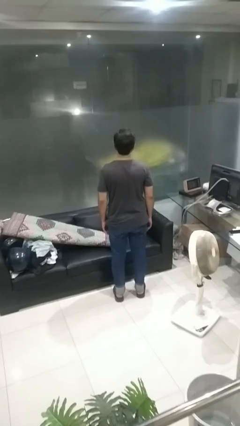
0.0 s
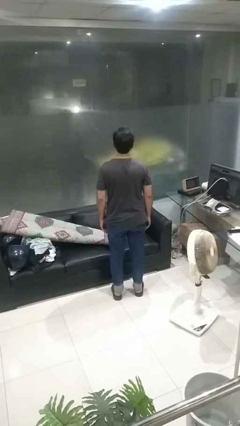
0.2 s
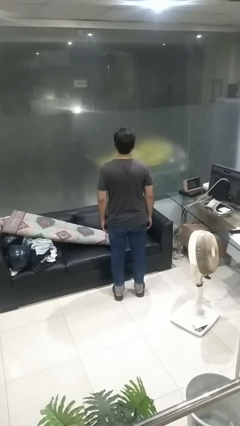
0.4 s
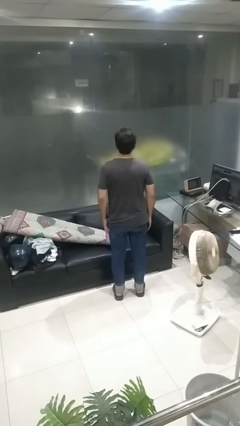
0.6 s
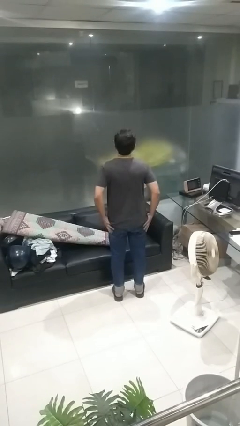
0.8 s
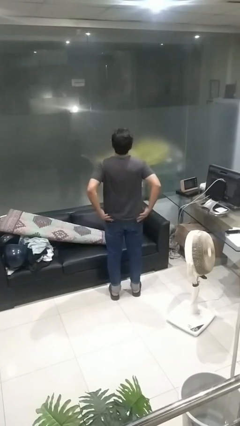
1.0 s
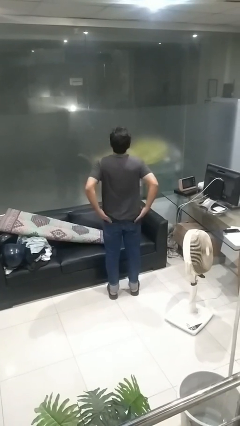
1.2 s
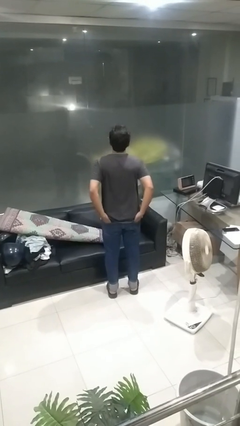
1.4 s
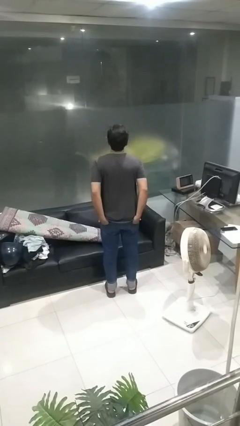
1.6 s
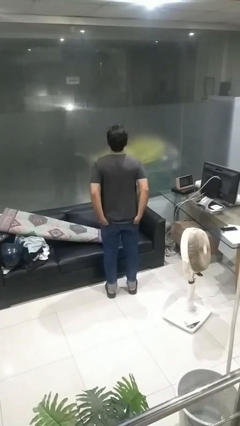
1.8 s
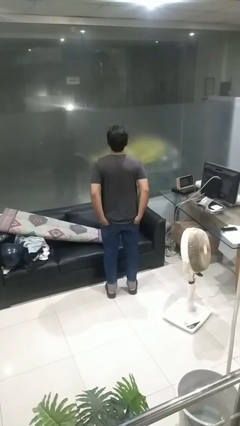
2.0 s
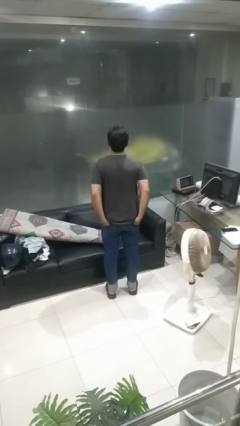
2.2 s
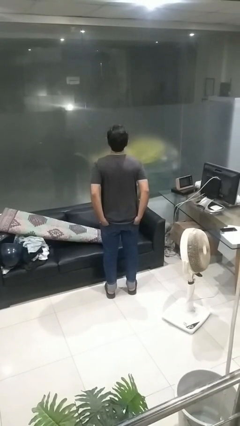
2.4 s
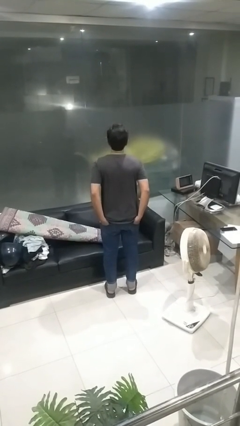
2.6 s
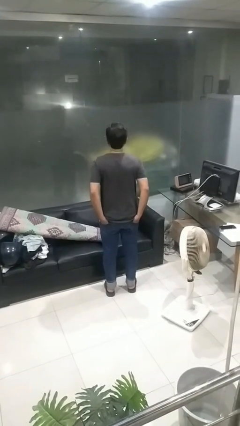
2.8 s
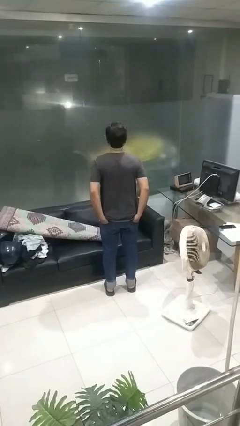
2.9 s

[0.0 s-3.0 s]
person puts hands in back pockets

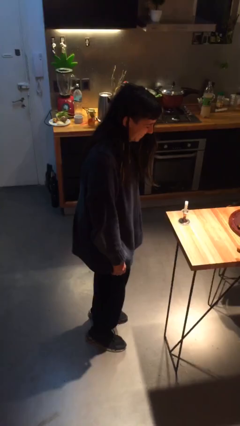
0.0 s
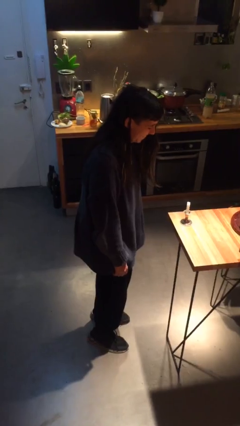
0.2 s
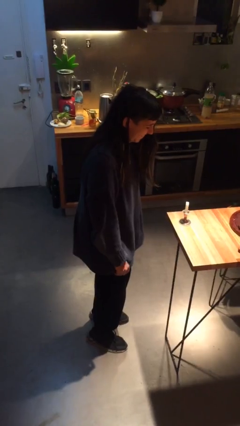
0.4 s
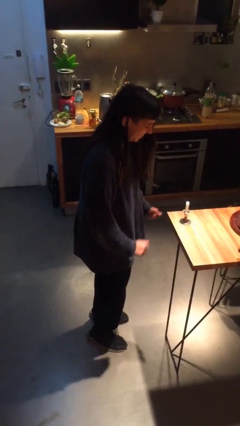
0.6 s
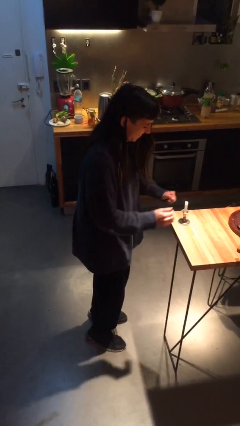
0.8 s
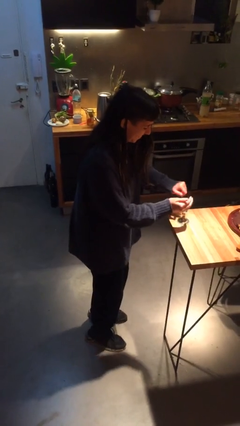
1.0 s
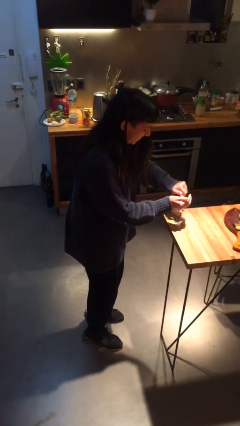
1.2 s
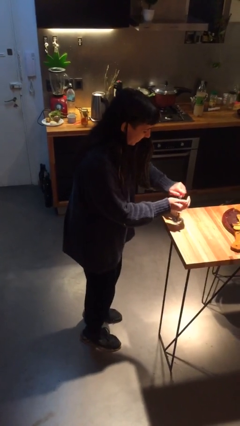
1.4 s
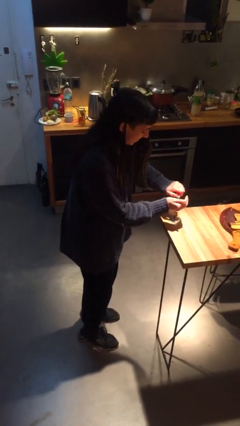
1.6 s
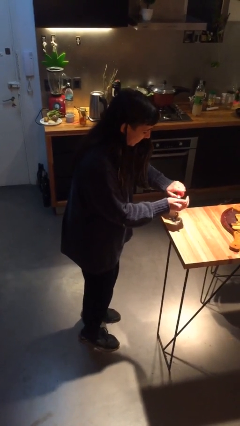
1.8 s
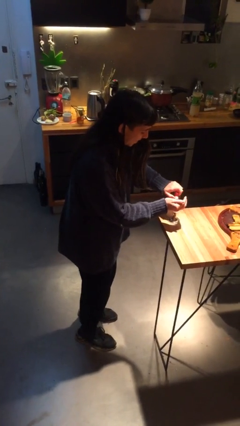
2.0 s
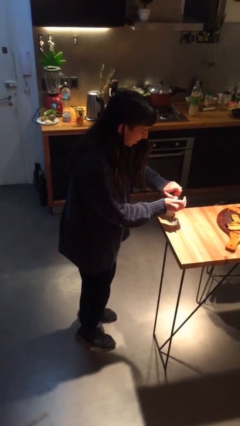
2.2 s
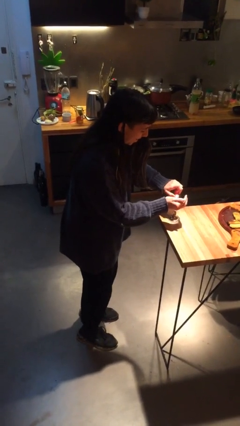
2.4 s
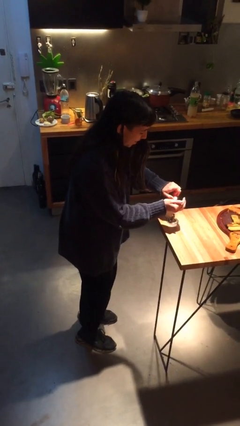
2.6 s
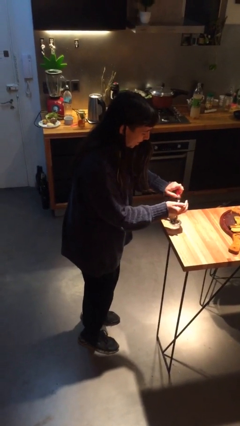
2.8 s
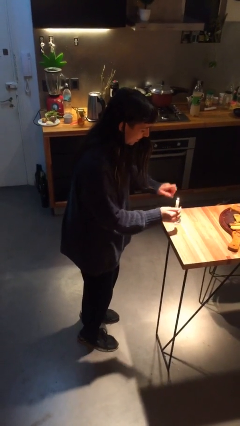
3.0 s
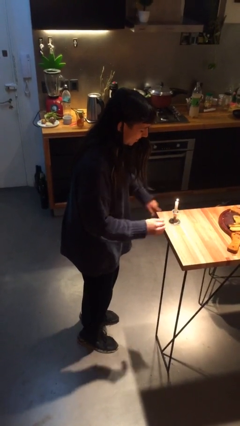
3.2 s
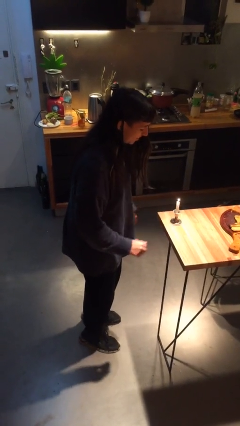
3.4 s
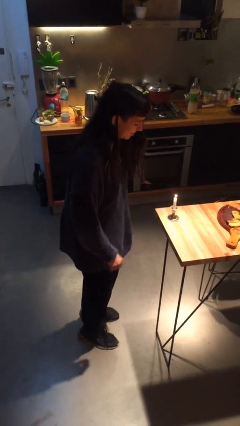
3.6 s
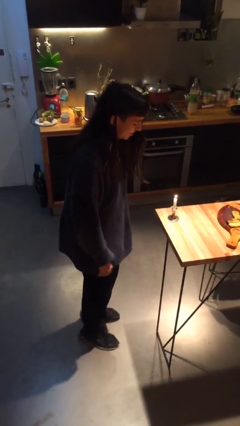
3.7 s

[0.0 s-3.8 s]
person lights candle

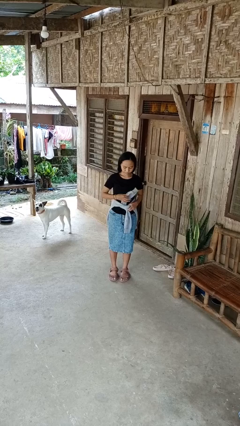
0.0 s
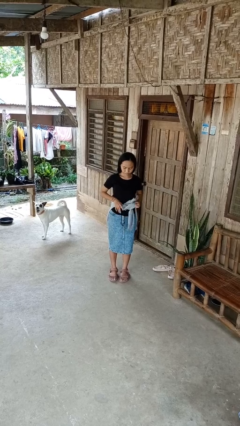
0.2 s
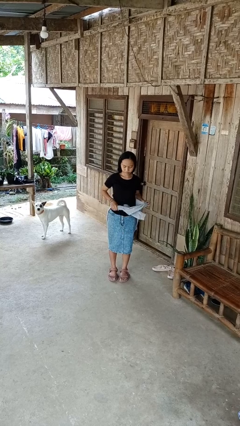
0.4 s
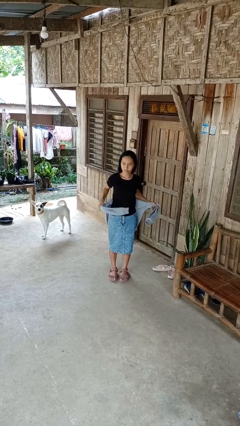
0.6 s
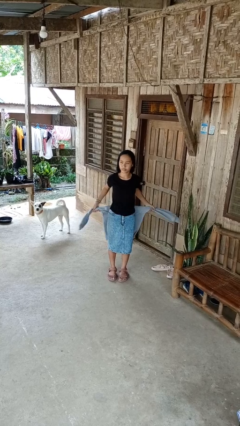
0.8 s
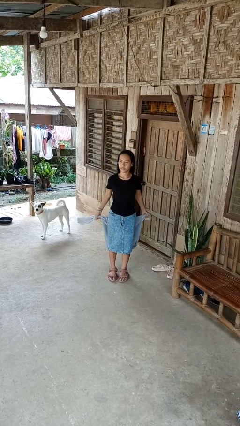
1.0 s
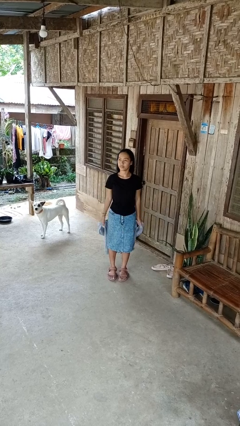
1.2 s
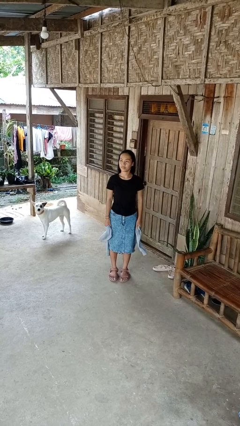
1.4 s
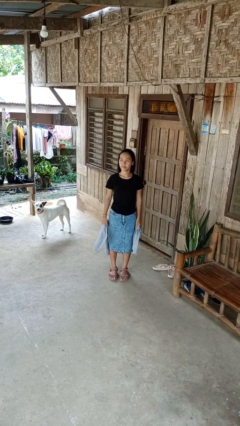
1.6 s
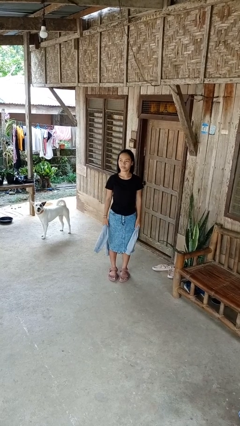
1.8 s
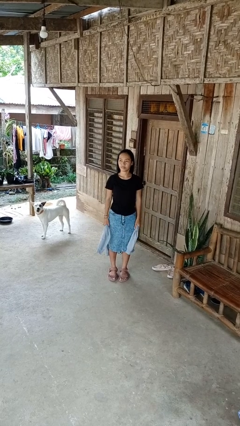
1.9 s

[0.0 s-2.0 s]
person unties jacket around waist

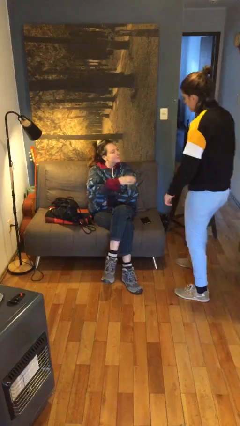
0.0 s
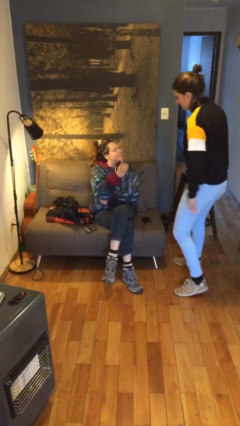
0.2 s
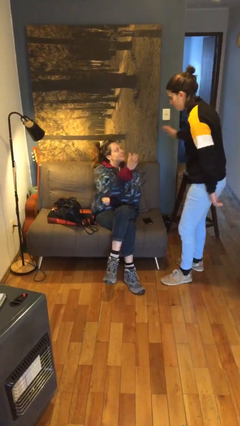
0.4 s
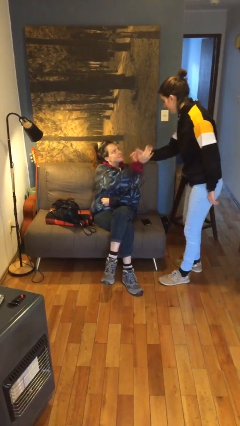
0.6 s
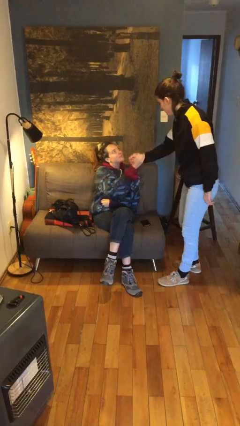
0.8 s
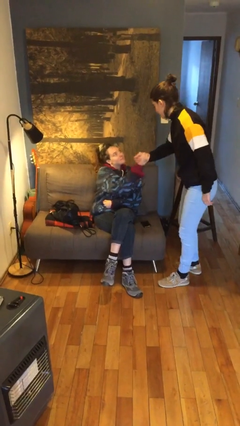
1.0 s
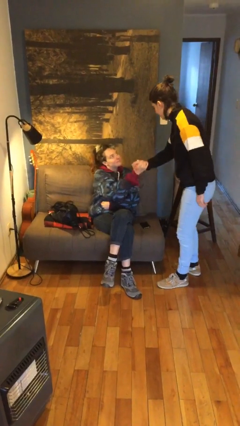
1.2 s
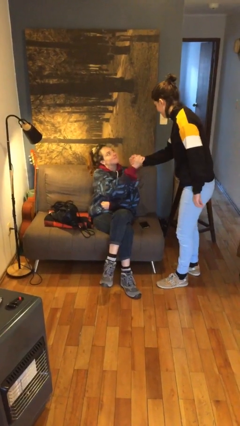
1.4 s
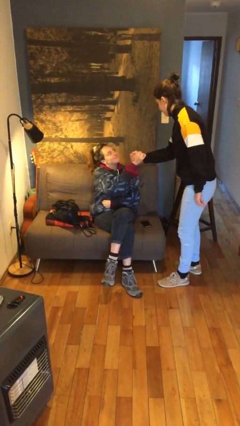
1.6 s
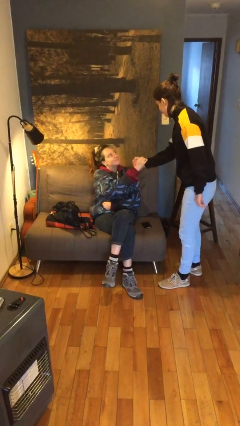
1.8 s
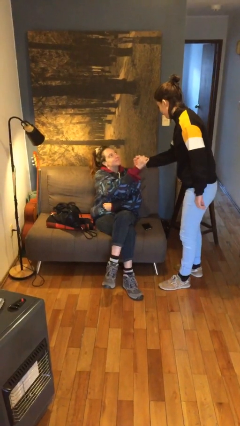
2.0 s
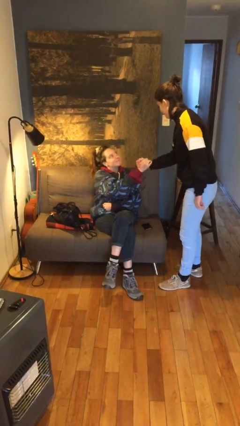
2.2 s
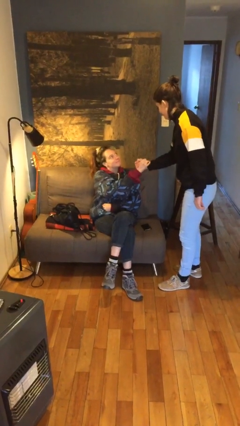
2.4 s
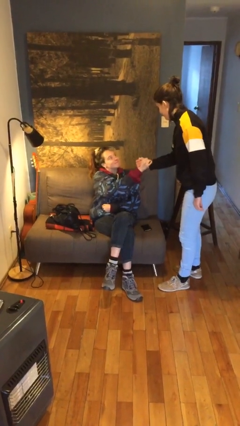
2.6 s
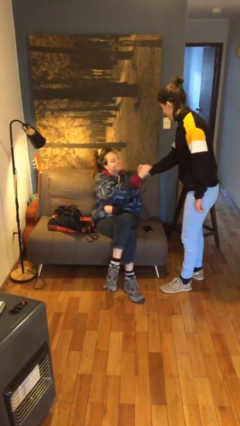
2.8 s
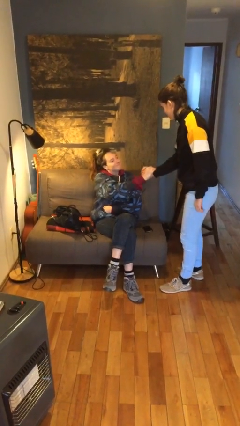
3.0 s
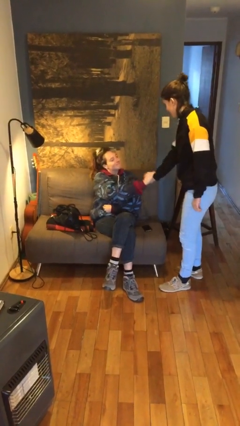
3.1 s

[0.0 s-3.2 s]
person shakes hand

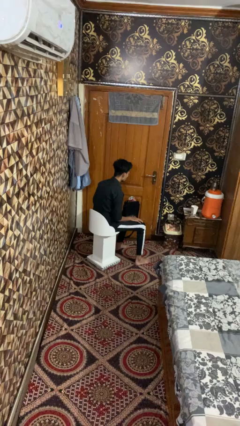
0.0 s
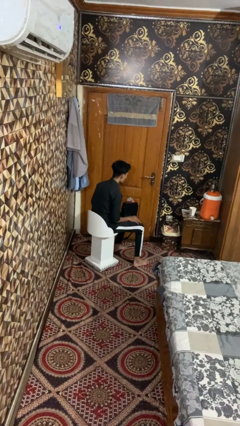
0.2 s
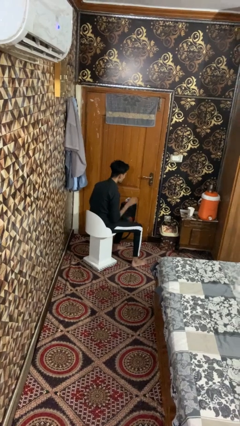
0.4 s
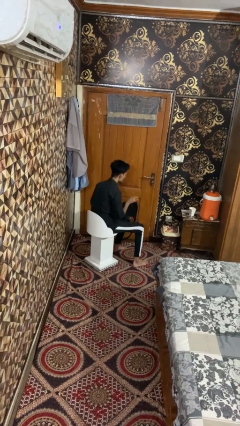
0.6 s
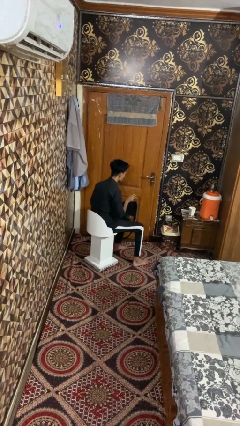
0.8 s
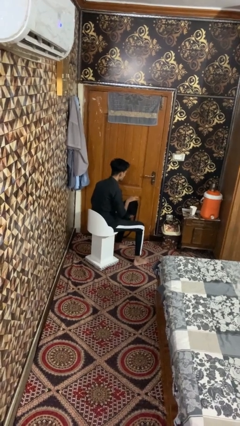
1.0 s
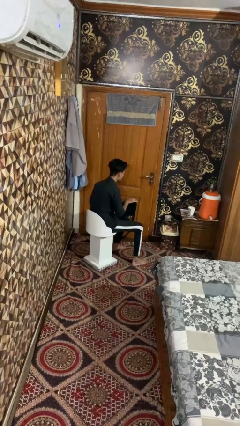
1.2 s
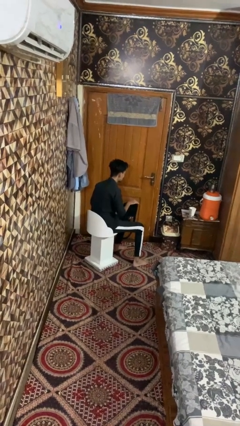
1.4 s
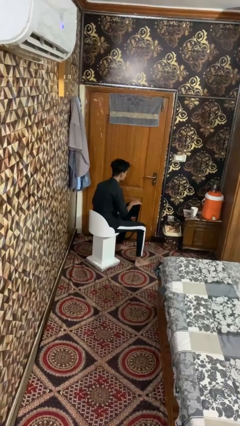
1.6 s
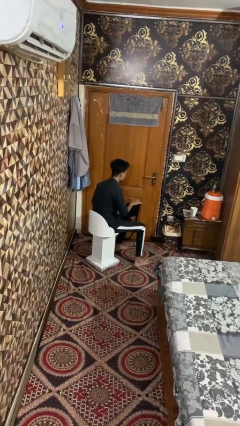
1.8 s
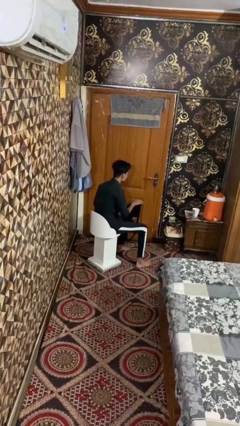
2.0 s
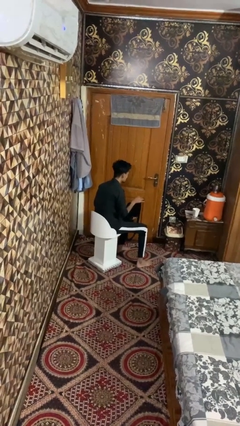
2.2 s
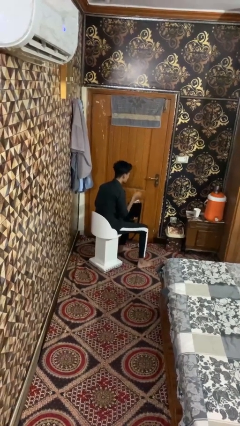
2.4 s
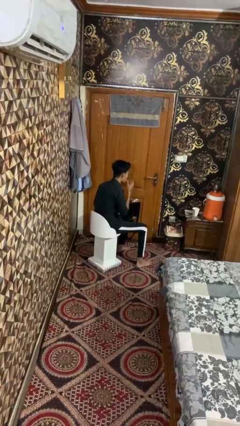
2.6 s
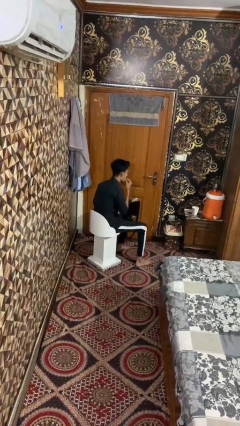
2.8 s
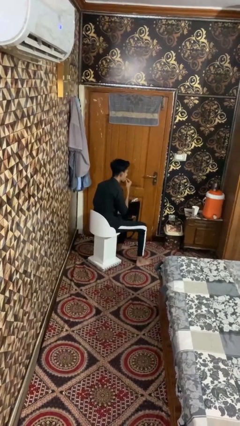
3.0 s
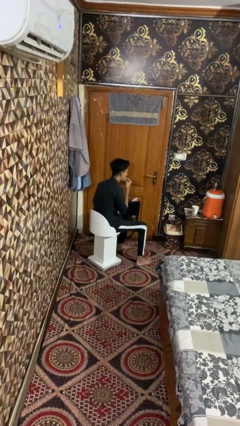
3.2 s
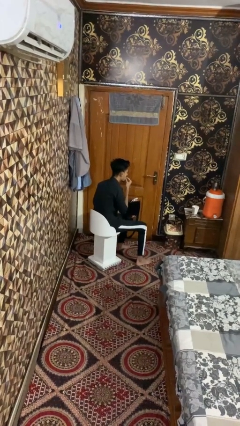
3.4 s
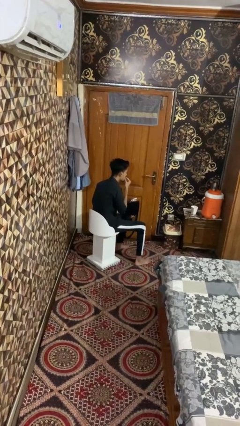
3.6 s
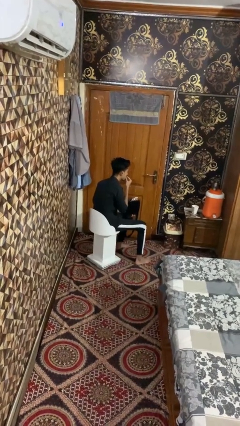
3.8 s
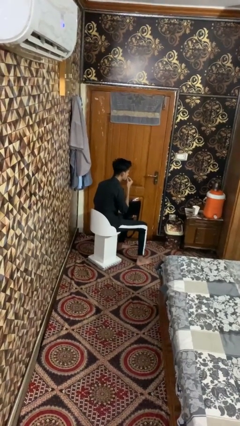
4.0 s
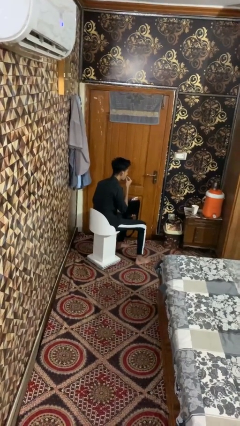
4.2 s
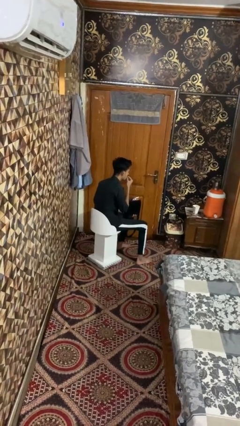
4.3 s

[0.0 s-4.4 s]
person eats snack from bag

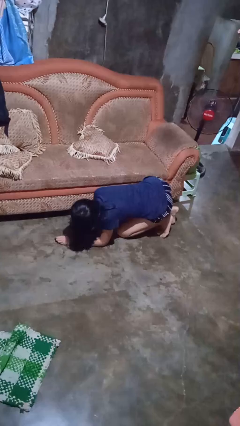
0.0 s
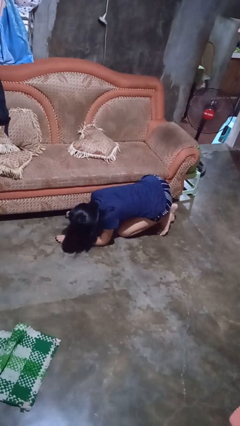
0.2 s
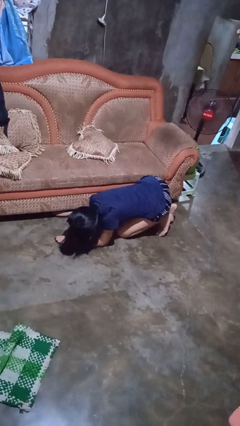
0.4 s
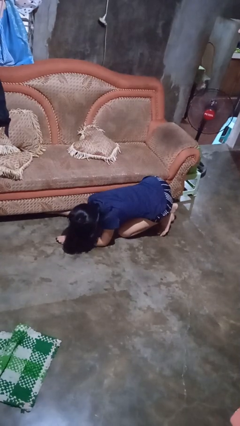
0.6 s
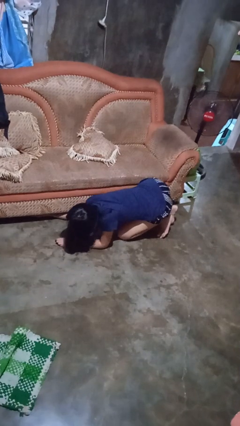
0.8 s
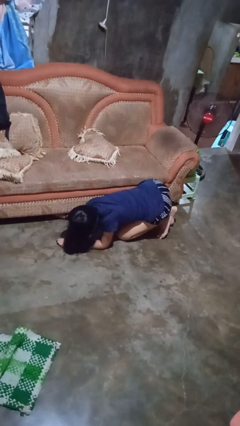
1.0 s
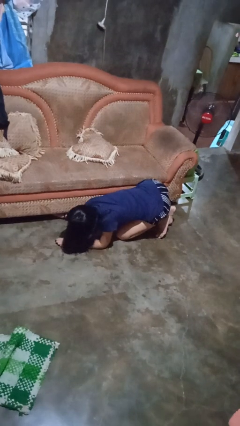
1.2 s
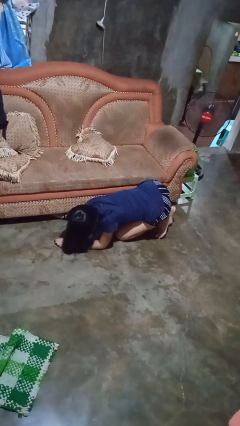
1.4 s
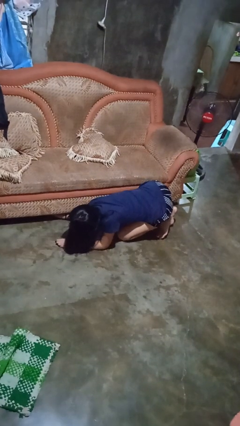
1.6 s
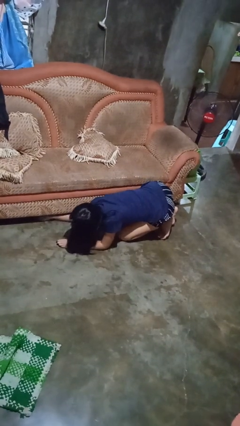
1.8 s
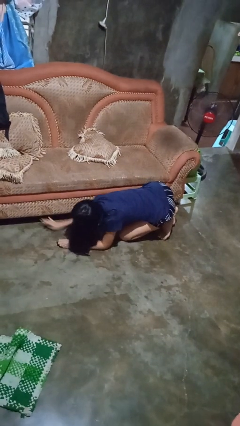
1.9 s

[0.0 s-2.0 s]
person searches under couch
